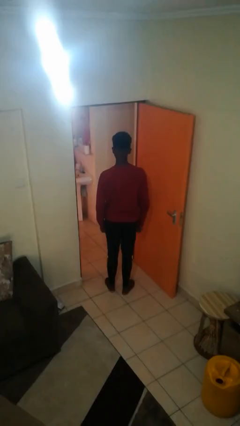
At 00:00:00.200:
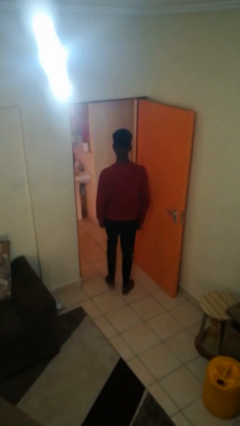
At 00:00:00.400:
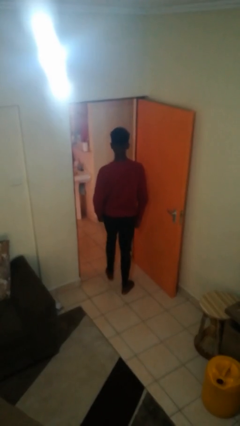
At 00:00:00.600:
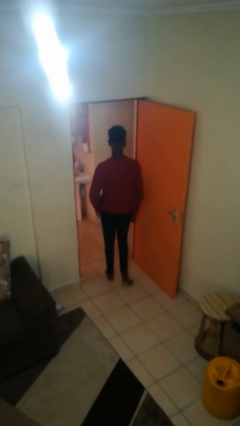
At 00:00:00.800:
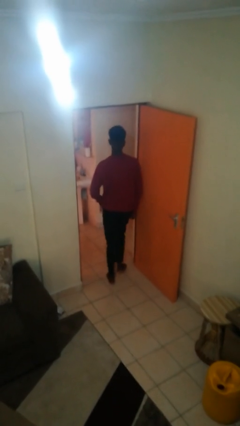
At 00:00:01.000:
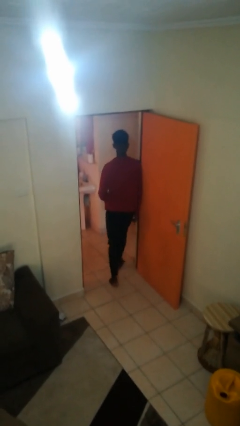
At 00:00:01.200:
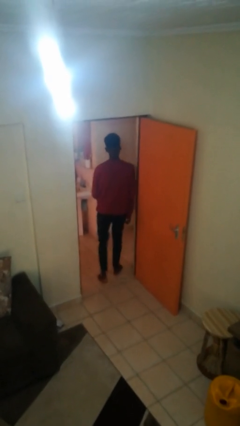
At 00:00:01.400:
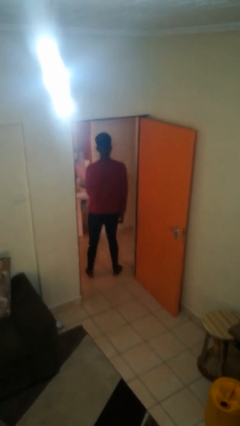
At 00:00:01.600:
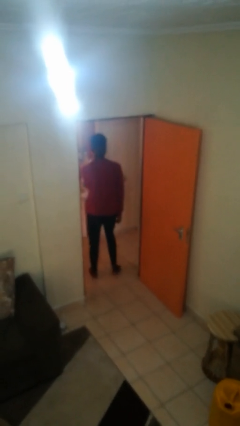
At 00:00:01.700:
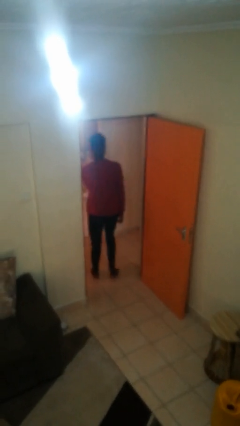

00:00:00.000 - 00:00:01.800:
person bumps into wall

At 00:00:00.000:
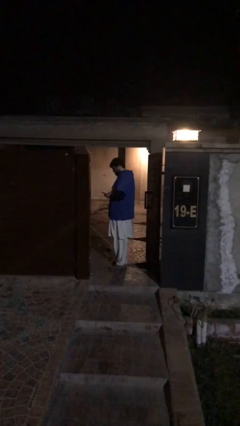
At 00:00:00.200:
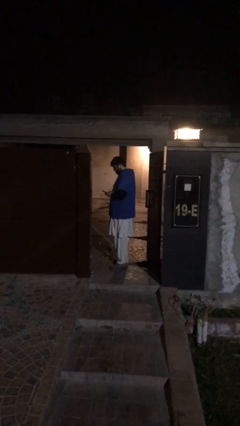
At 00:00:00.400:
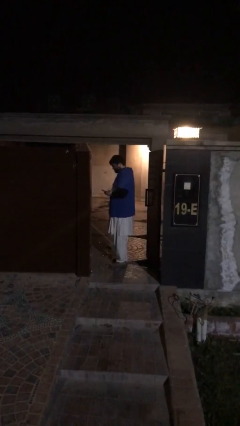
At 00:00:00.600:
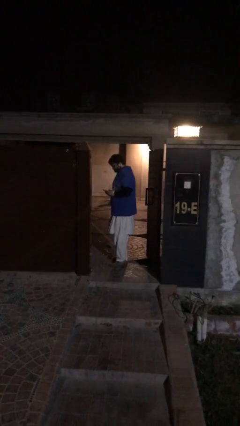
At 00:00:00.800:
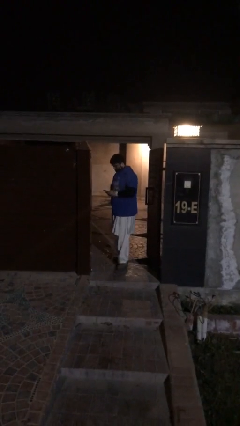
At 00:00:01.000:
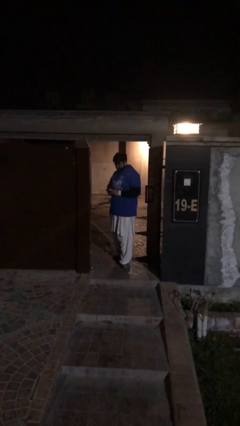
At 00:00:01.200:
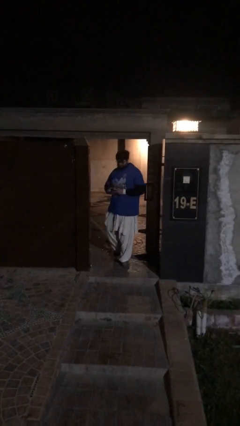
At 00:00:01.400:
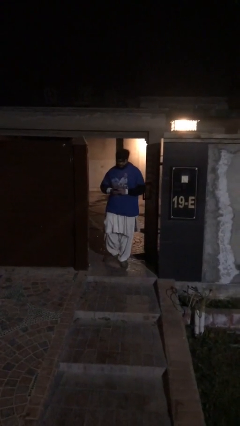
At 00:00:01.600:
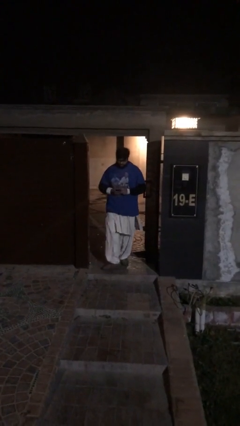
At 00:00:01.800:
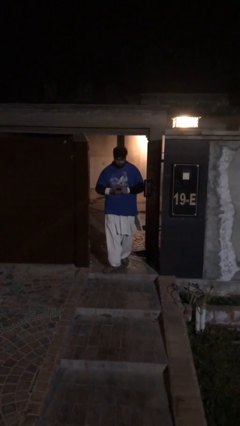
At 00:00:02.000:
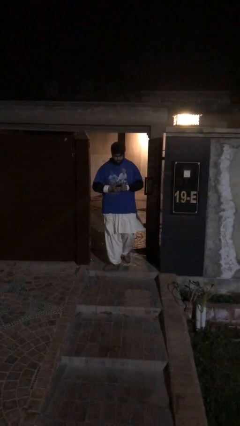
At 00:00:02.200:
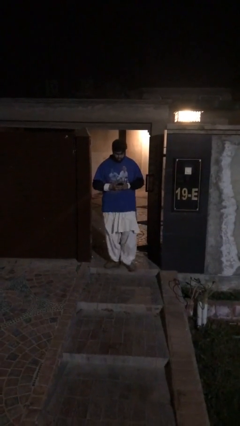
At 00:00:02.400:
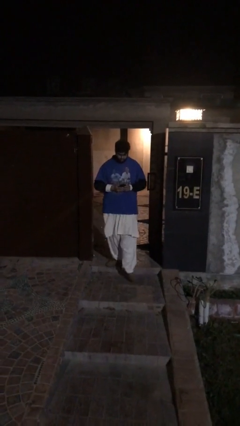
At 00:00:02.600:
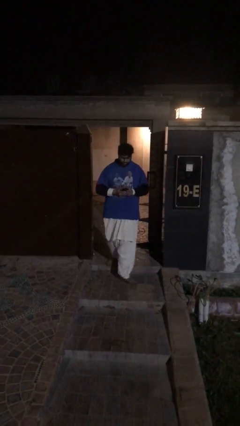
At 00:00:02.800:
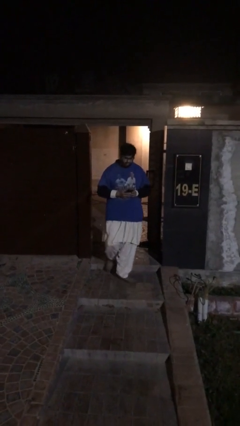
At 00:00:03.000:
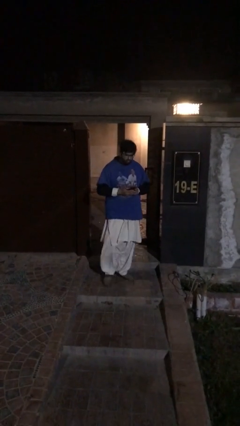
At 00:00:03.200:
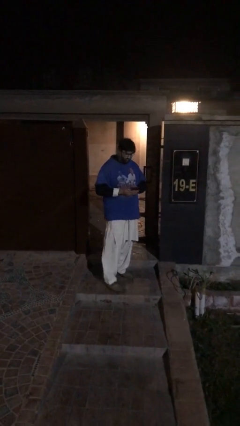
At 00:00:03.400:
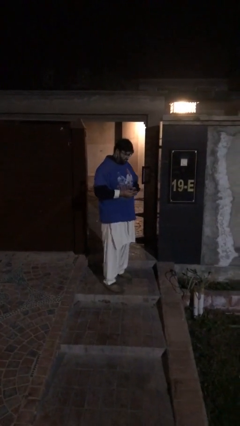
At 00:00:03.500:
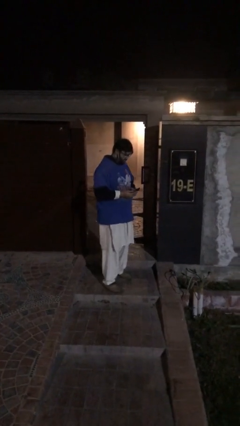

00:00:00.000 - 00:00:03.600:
person enters scene through structure

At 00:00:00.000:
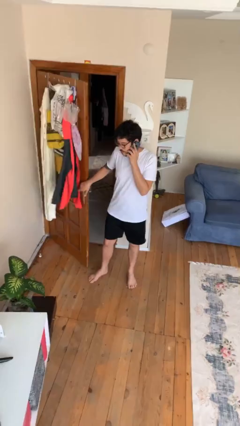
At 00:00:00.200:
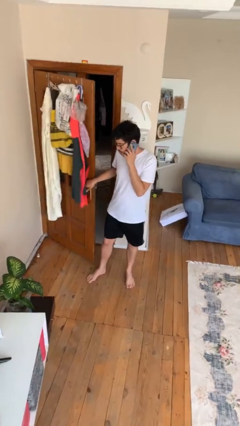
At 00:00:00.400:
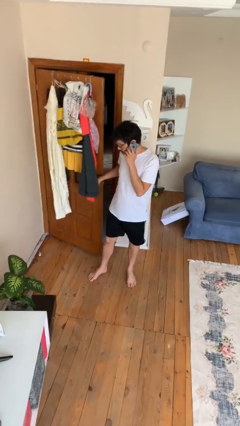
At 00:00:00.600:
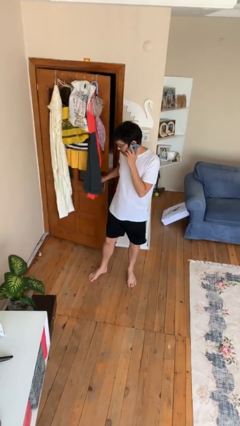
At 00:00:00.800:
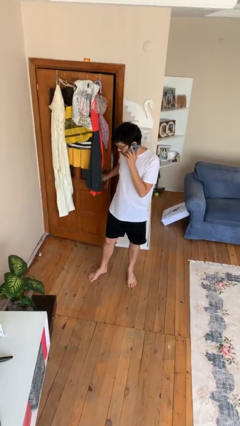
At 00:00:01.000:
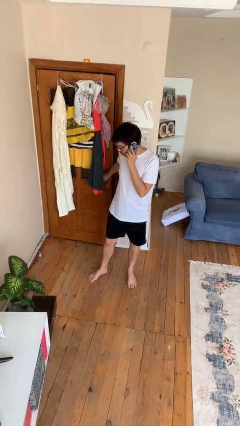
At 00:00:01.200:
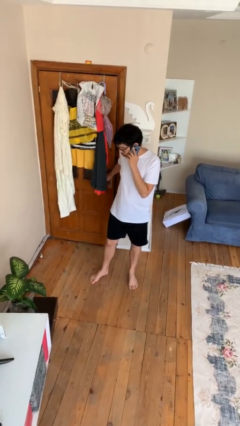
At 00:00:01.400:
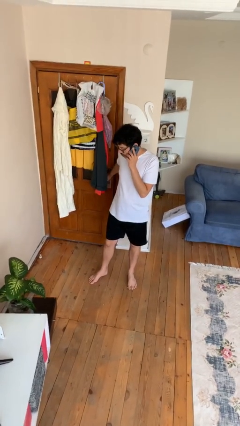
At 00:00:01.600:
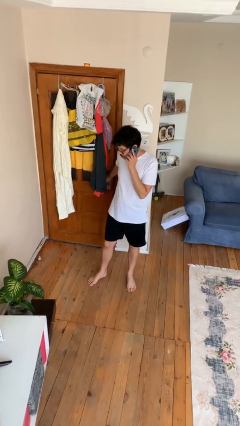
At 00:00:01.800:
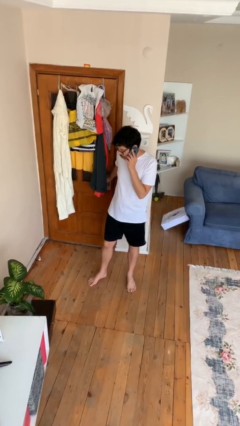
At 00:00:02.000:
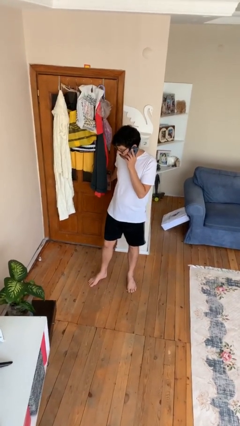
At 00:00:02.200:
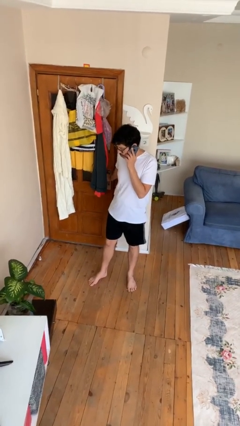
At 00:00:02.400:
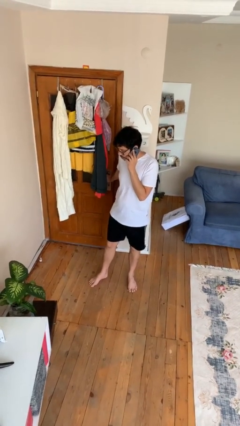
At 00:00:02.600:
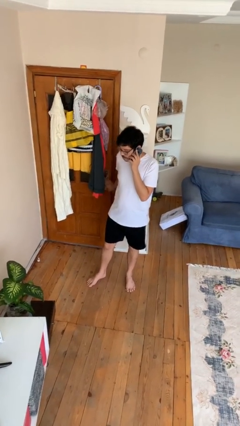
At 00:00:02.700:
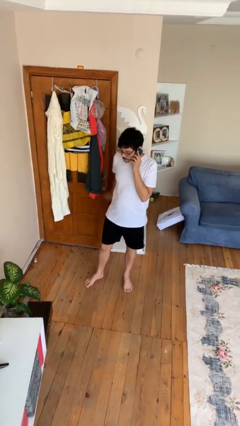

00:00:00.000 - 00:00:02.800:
person closes facility door

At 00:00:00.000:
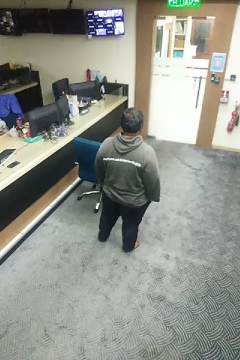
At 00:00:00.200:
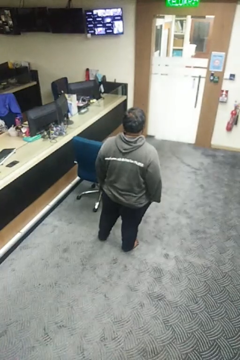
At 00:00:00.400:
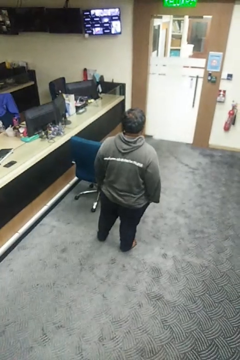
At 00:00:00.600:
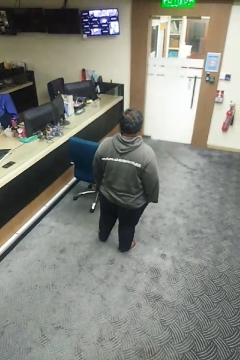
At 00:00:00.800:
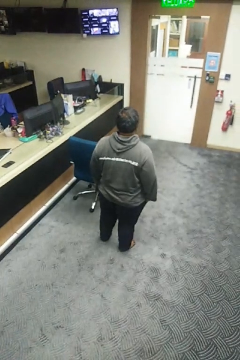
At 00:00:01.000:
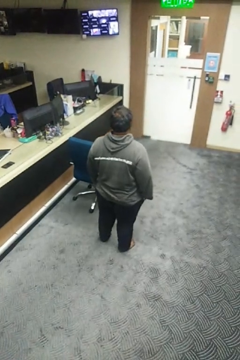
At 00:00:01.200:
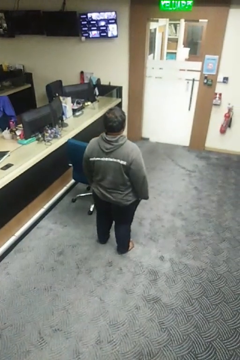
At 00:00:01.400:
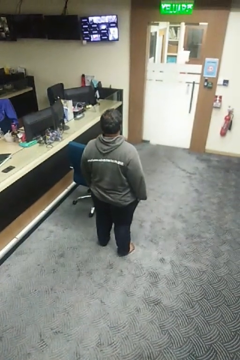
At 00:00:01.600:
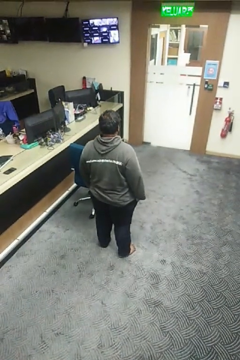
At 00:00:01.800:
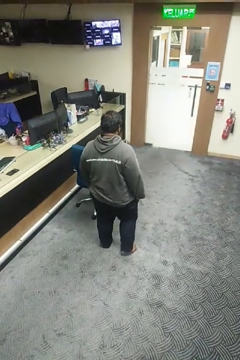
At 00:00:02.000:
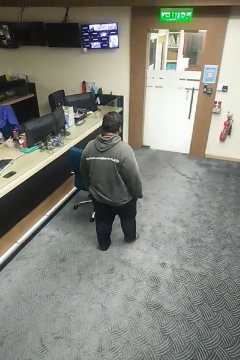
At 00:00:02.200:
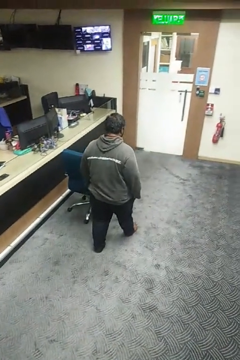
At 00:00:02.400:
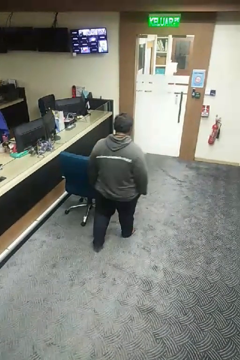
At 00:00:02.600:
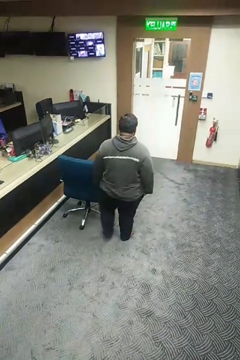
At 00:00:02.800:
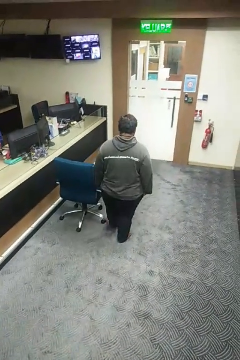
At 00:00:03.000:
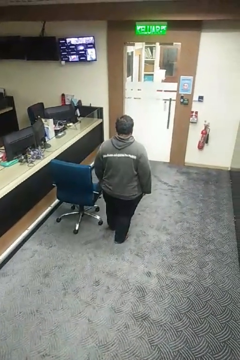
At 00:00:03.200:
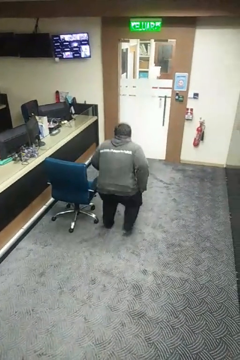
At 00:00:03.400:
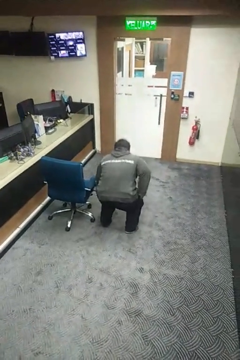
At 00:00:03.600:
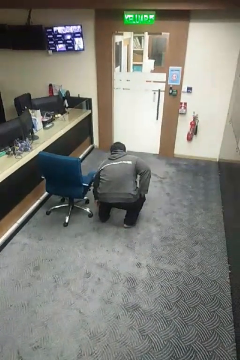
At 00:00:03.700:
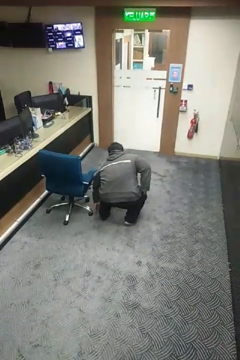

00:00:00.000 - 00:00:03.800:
person stubs toe

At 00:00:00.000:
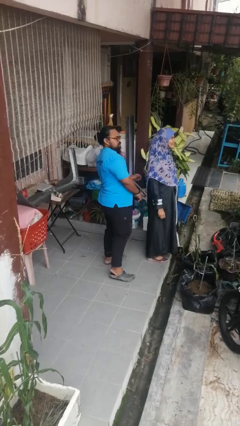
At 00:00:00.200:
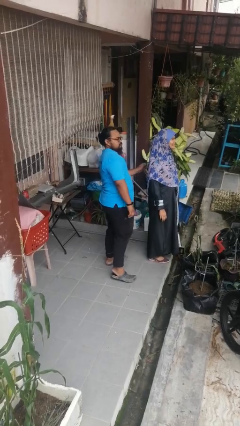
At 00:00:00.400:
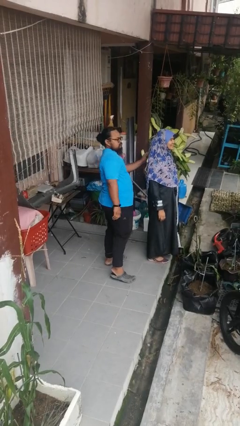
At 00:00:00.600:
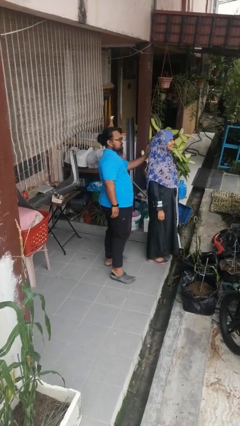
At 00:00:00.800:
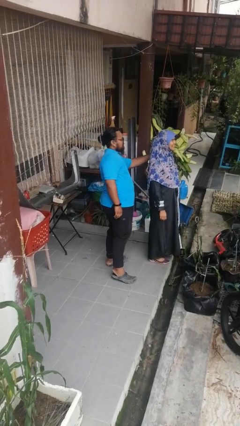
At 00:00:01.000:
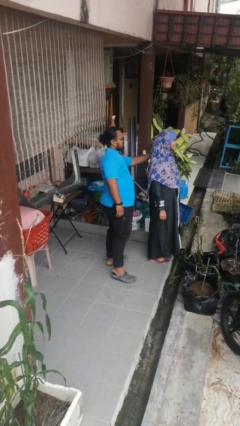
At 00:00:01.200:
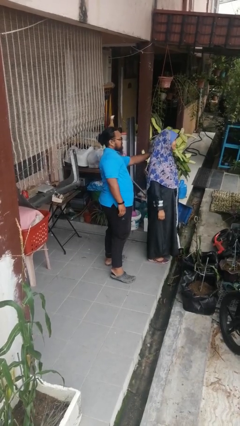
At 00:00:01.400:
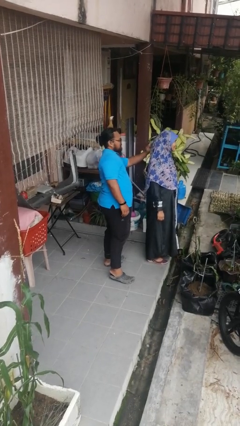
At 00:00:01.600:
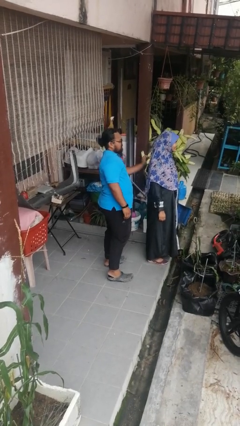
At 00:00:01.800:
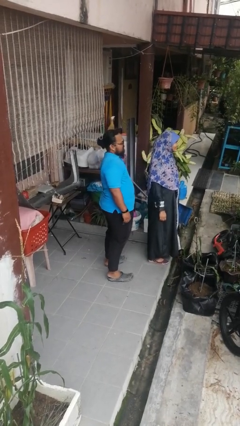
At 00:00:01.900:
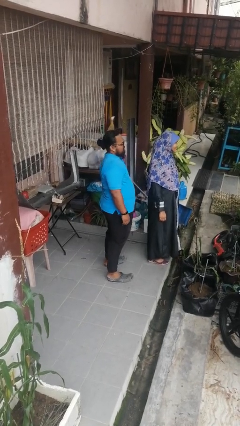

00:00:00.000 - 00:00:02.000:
person touches back of person

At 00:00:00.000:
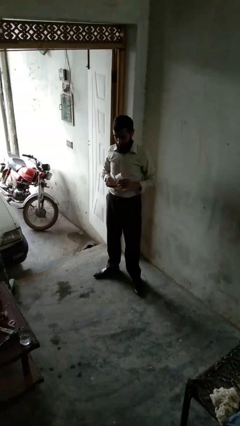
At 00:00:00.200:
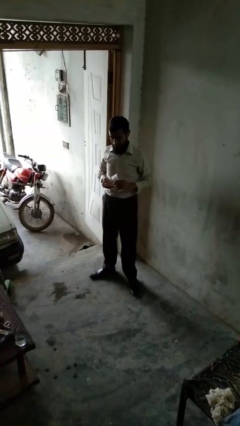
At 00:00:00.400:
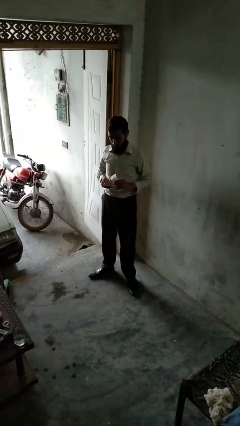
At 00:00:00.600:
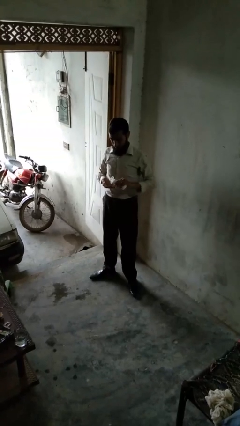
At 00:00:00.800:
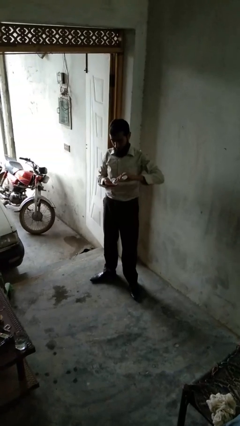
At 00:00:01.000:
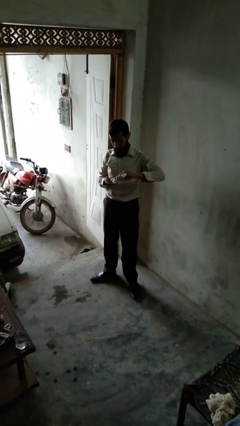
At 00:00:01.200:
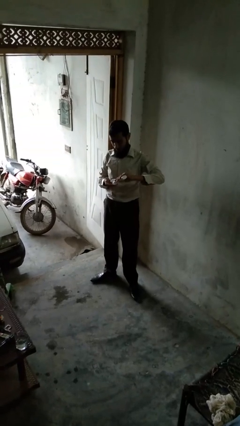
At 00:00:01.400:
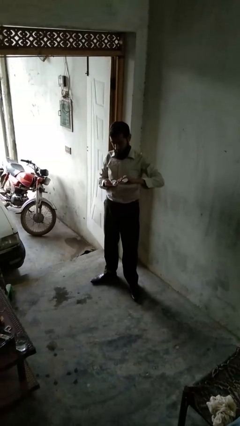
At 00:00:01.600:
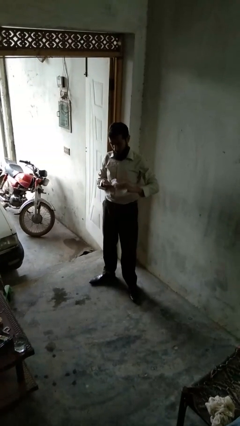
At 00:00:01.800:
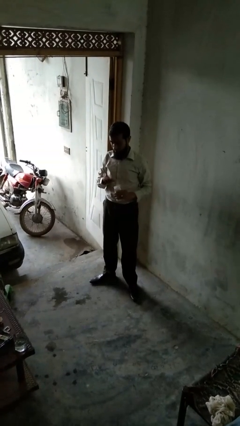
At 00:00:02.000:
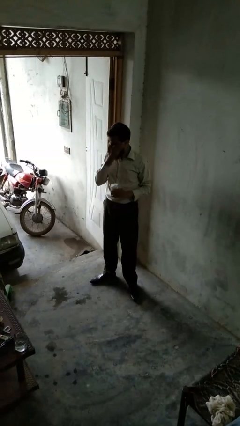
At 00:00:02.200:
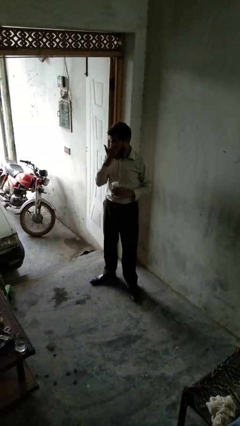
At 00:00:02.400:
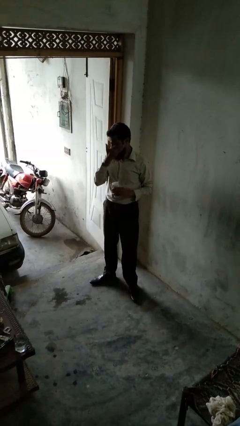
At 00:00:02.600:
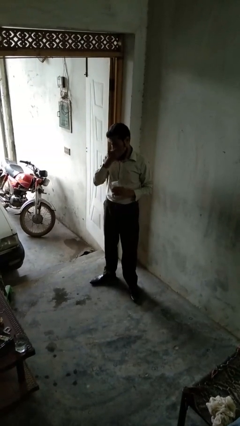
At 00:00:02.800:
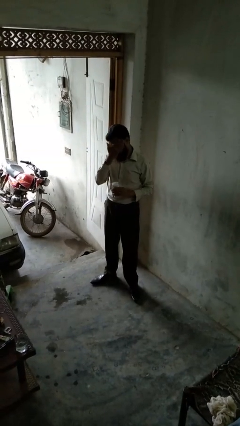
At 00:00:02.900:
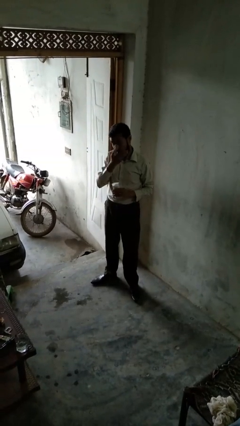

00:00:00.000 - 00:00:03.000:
person applies sunscreen

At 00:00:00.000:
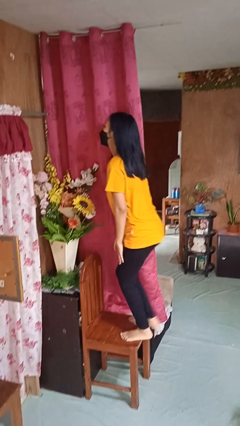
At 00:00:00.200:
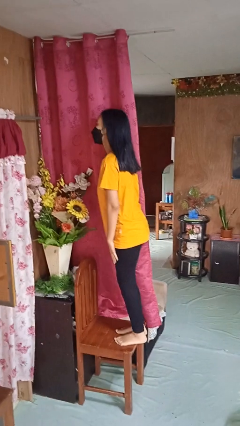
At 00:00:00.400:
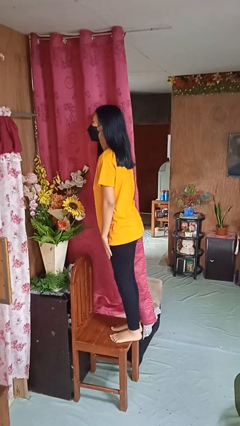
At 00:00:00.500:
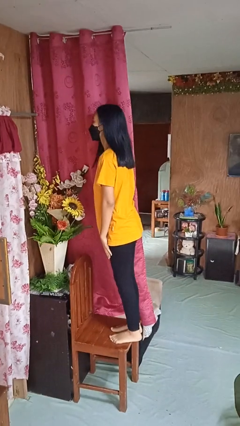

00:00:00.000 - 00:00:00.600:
person climbs on chair

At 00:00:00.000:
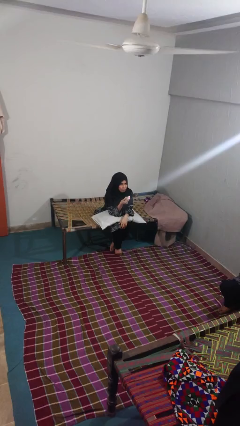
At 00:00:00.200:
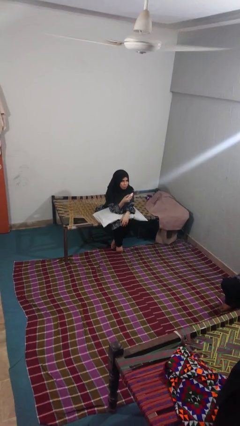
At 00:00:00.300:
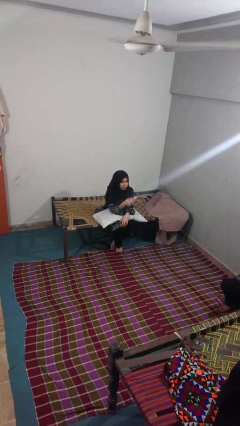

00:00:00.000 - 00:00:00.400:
person uses television remote
